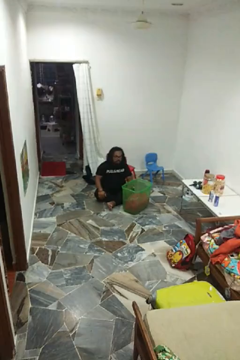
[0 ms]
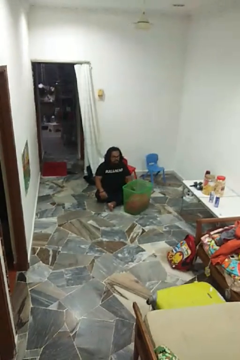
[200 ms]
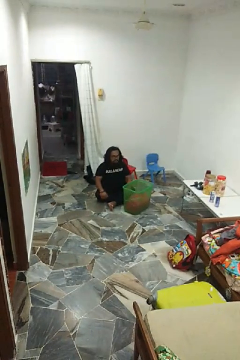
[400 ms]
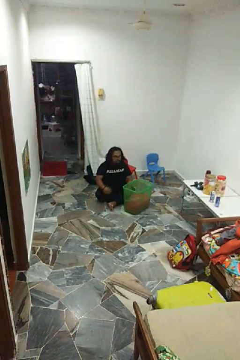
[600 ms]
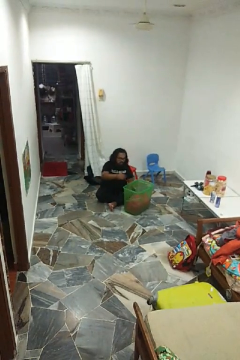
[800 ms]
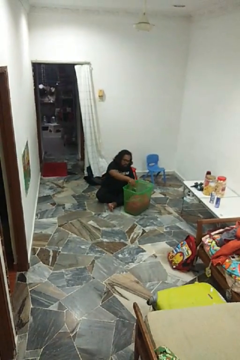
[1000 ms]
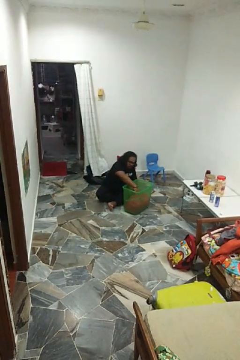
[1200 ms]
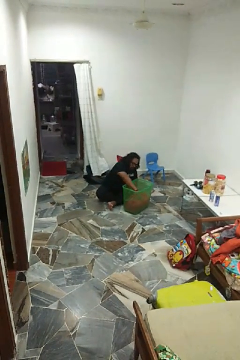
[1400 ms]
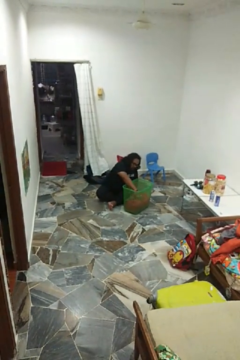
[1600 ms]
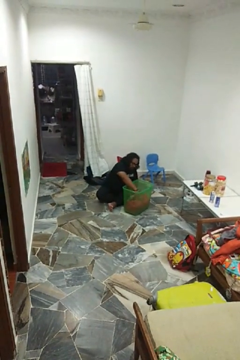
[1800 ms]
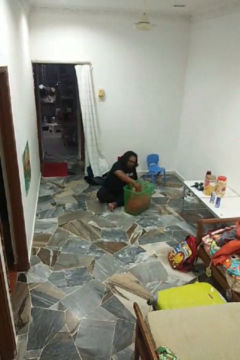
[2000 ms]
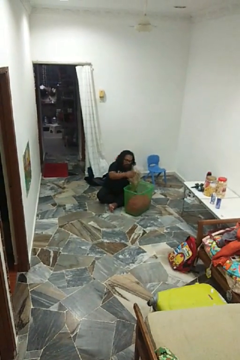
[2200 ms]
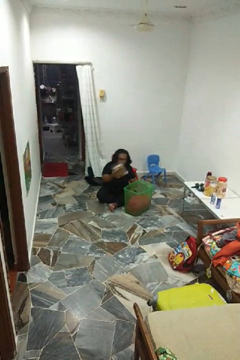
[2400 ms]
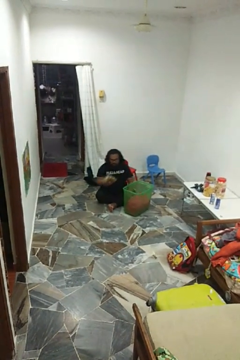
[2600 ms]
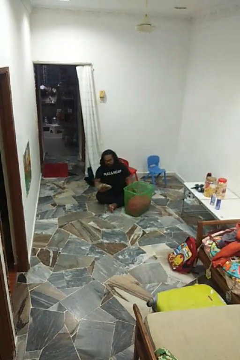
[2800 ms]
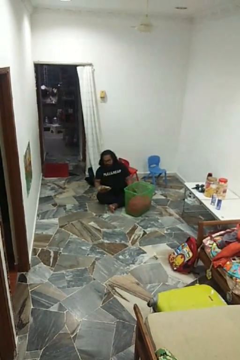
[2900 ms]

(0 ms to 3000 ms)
person takes object from basket

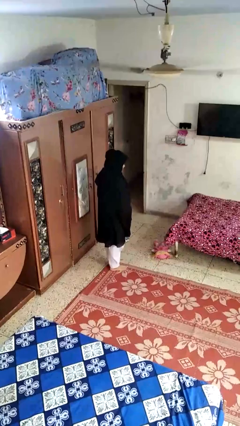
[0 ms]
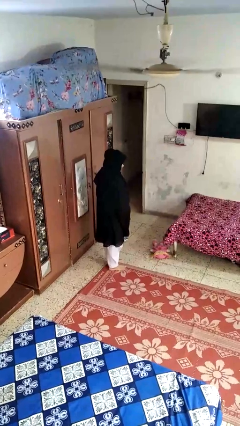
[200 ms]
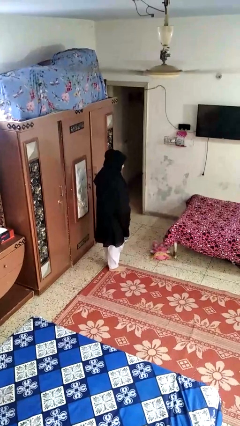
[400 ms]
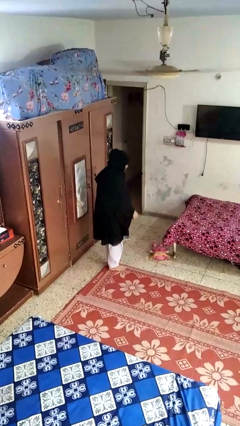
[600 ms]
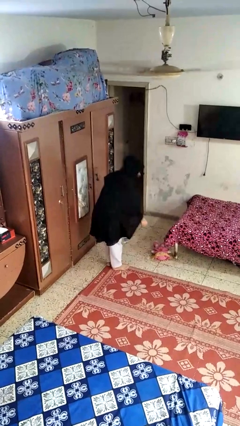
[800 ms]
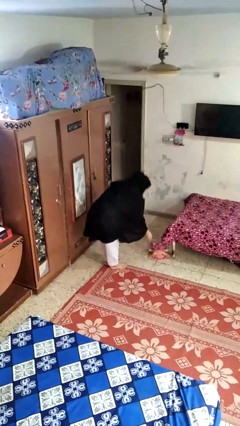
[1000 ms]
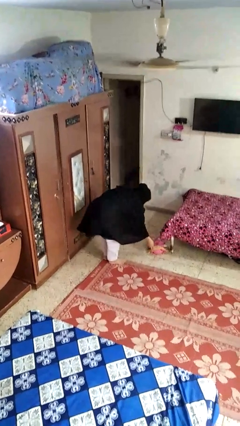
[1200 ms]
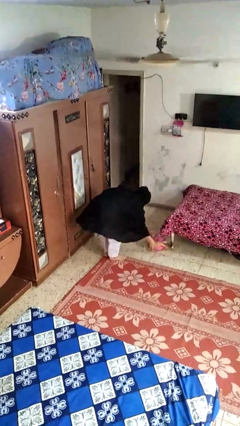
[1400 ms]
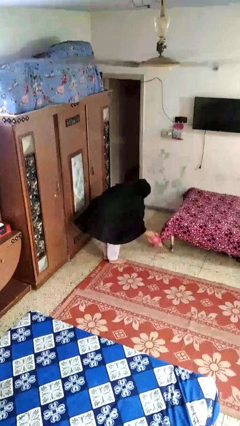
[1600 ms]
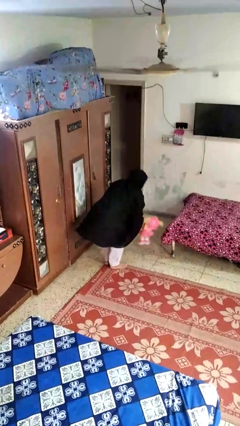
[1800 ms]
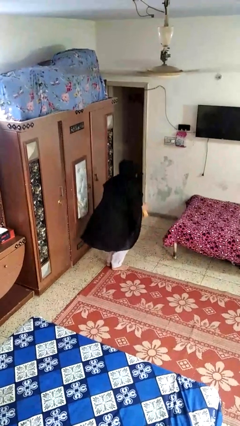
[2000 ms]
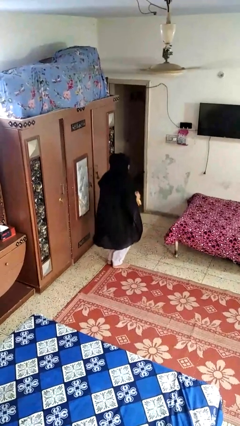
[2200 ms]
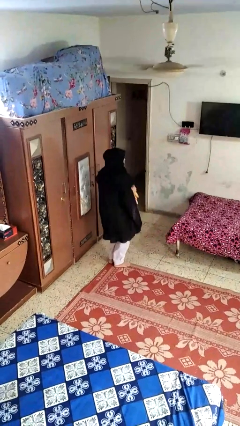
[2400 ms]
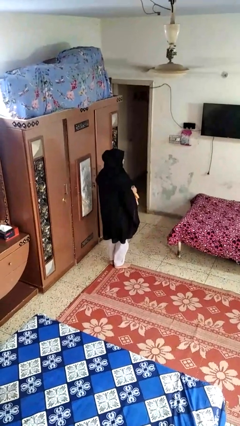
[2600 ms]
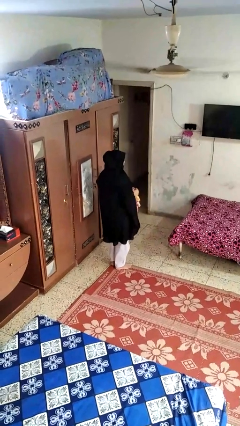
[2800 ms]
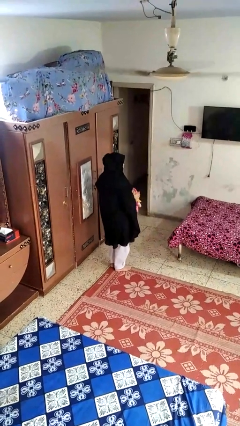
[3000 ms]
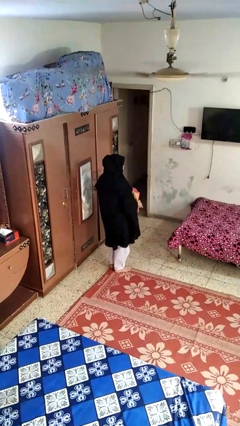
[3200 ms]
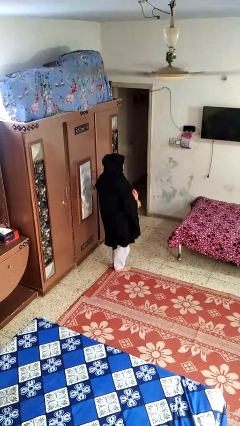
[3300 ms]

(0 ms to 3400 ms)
person picks up object from floor

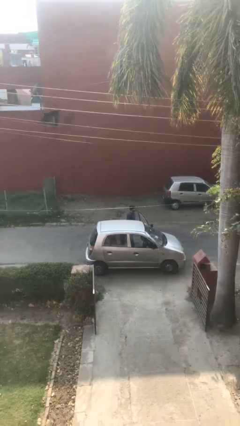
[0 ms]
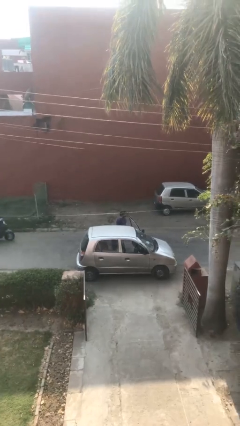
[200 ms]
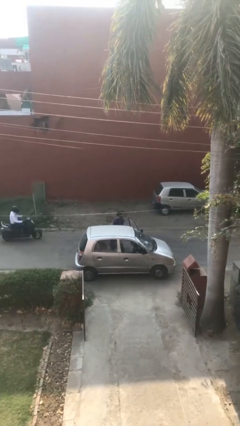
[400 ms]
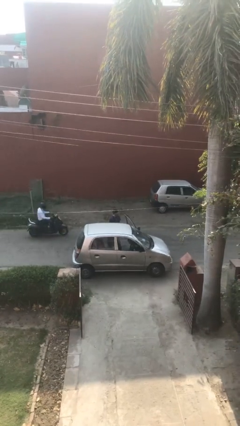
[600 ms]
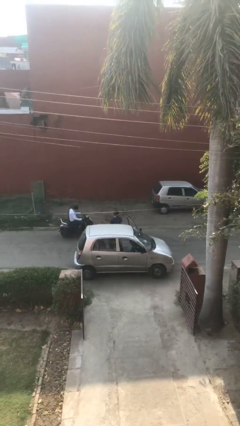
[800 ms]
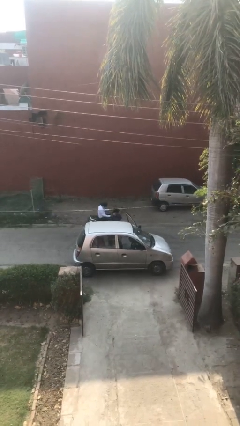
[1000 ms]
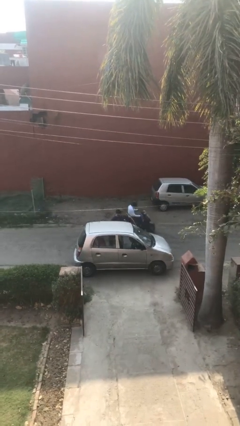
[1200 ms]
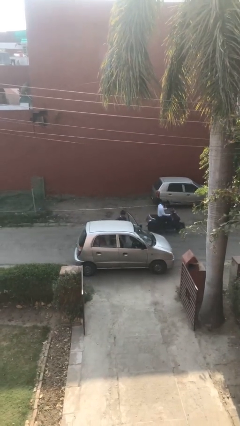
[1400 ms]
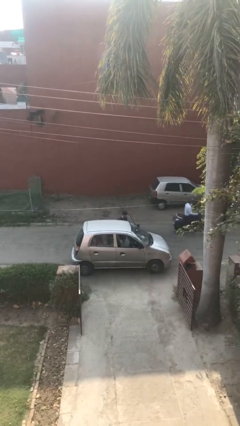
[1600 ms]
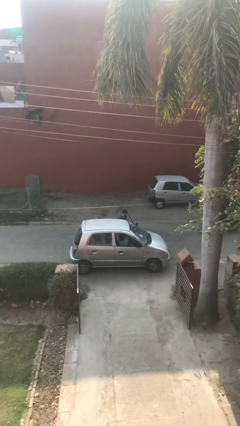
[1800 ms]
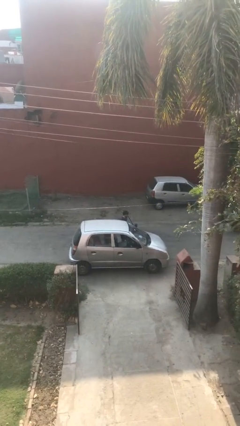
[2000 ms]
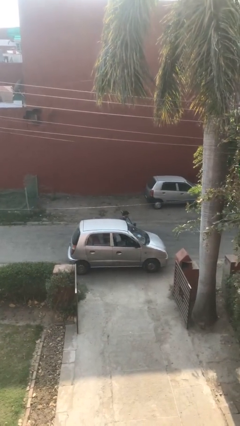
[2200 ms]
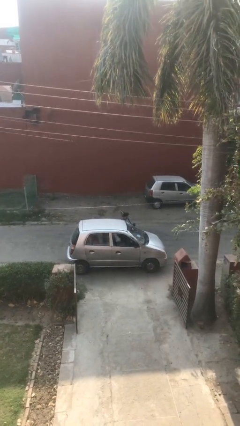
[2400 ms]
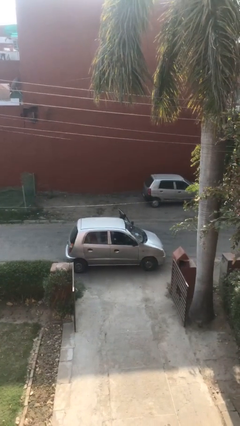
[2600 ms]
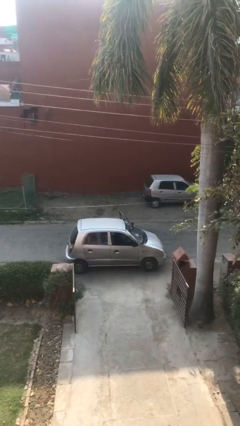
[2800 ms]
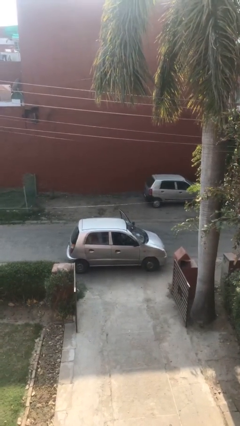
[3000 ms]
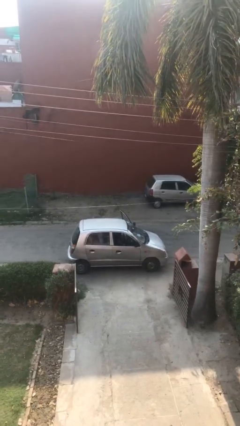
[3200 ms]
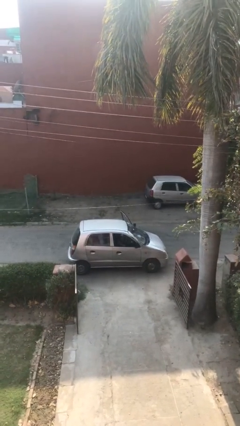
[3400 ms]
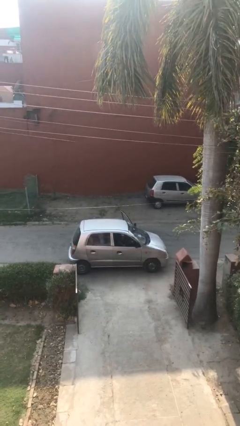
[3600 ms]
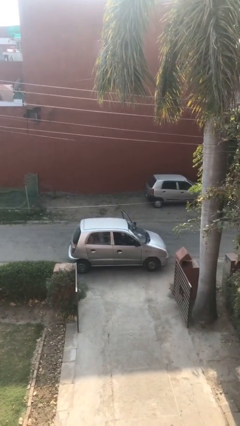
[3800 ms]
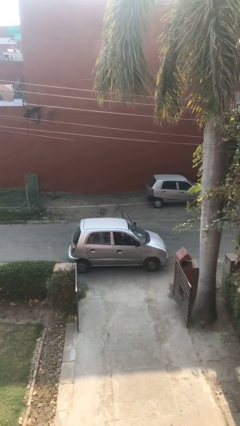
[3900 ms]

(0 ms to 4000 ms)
person enters car

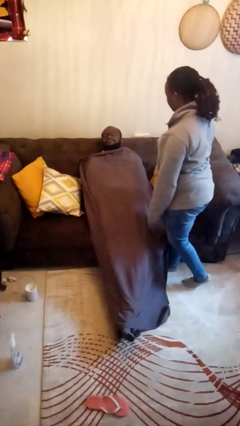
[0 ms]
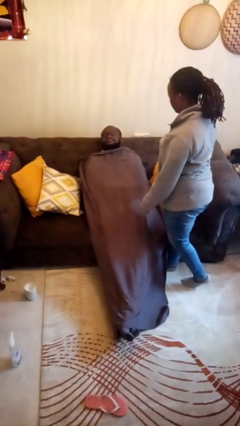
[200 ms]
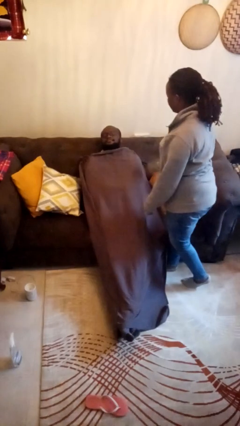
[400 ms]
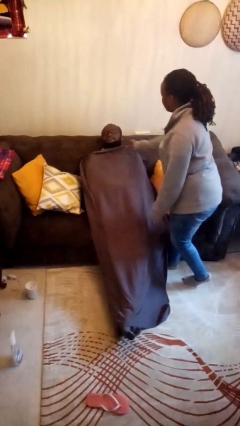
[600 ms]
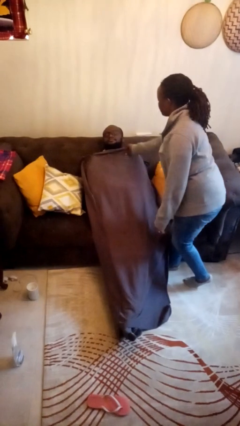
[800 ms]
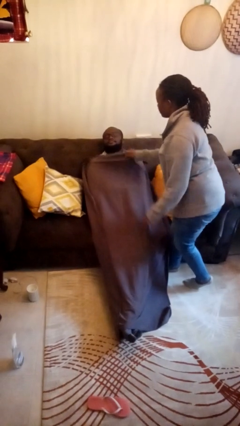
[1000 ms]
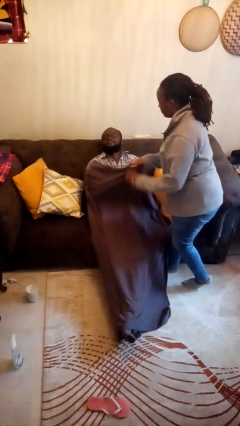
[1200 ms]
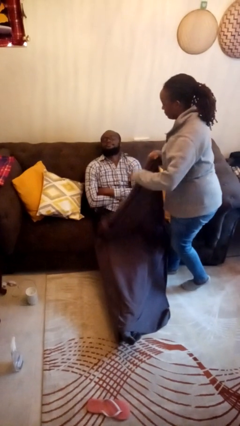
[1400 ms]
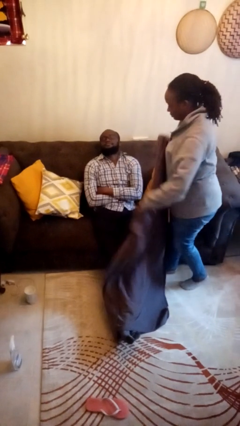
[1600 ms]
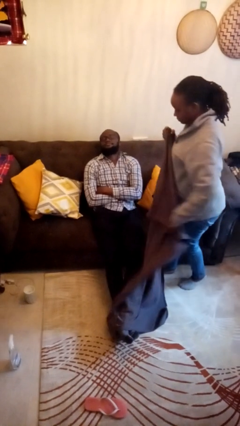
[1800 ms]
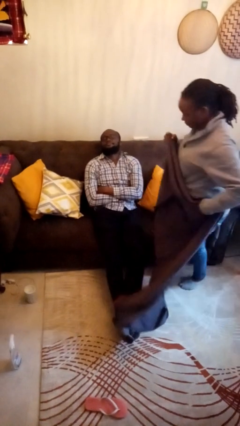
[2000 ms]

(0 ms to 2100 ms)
person uncovers friend with blanket

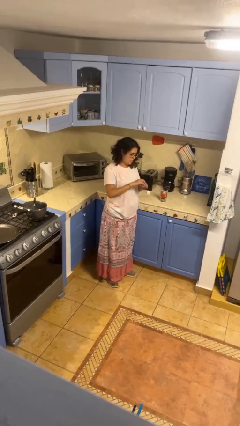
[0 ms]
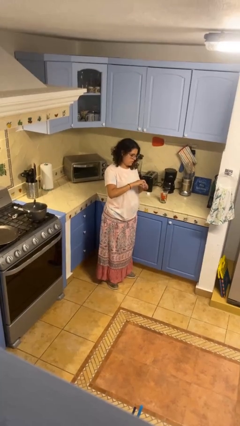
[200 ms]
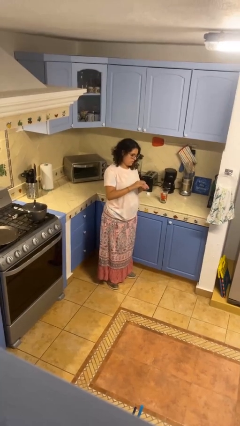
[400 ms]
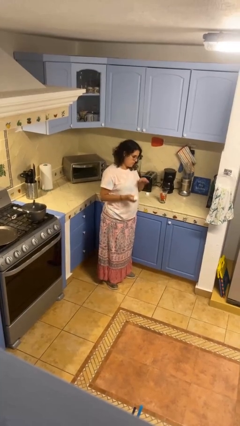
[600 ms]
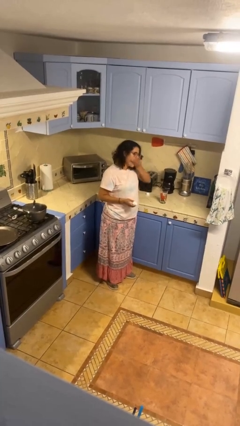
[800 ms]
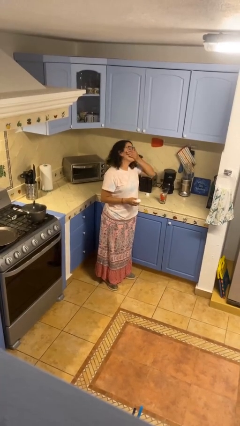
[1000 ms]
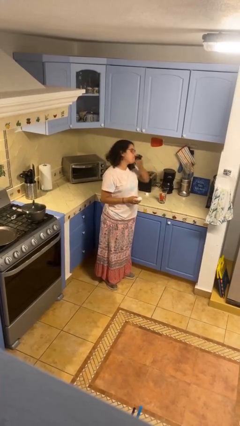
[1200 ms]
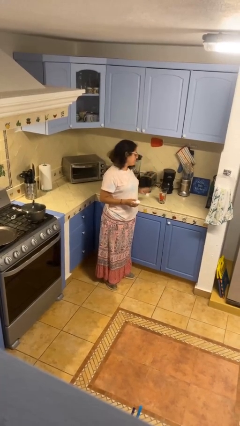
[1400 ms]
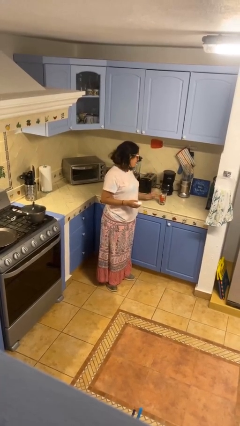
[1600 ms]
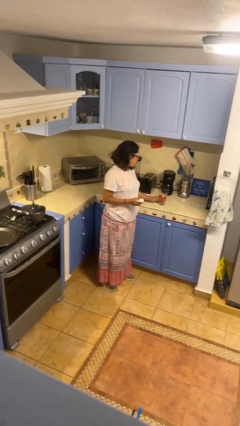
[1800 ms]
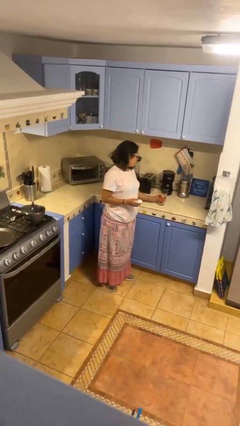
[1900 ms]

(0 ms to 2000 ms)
person takes medicine pills

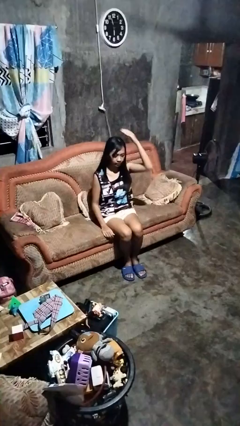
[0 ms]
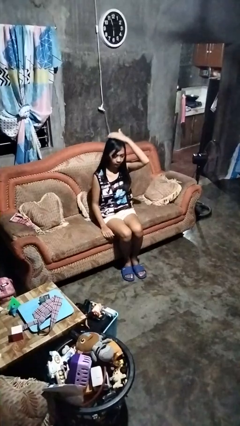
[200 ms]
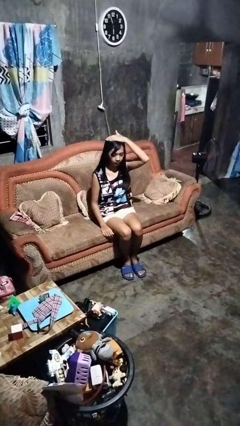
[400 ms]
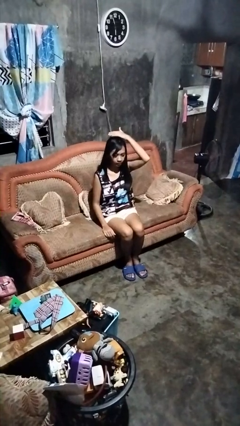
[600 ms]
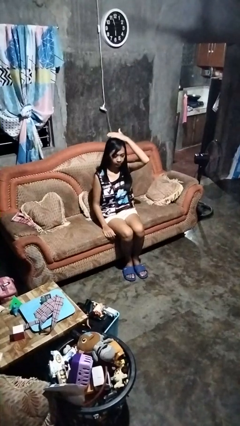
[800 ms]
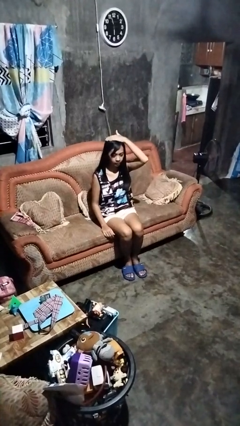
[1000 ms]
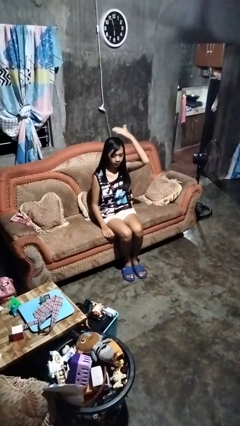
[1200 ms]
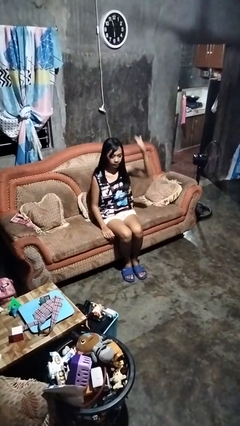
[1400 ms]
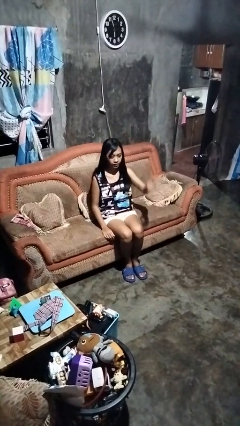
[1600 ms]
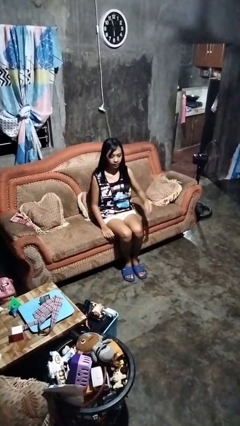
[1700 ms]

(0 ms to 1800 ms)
person pats head

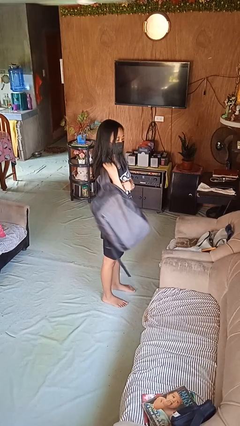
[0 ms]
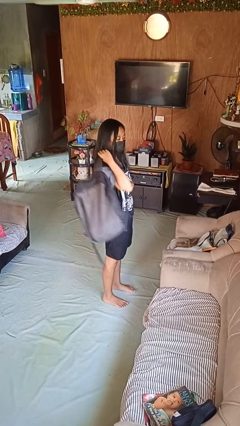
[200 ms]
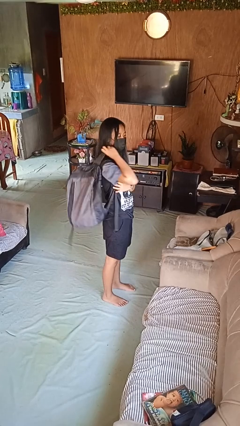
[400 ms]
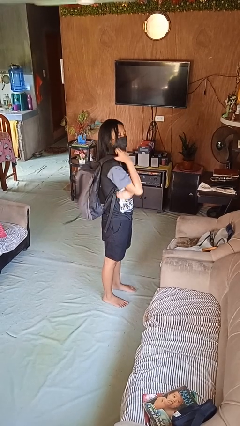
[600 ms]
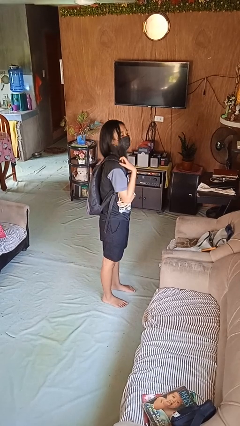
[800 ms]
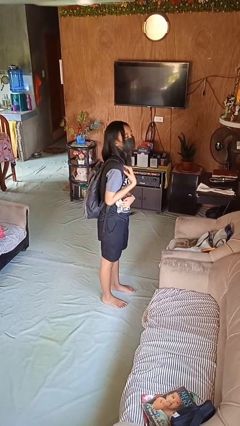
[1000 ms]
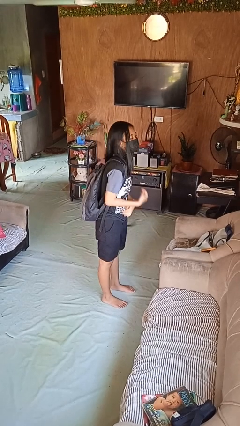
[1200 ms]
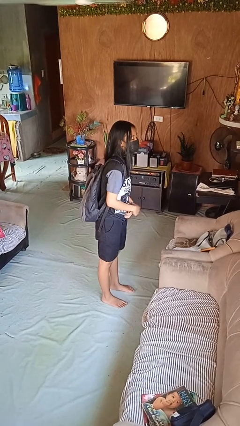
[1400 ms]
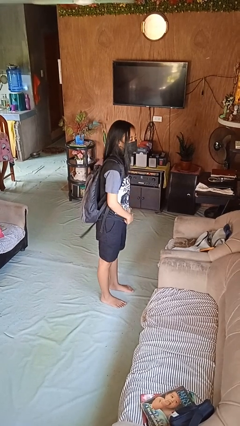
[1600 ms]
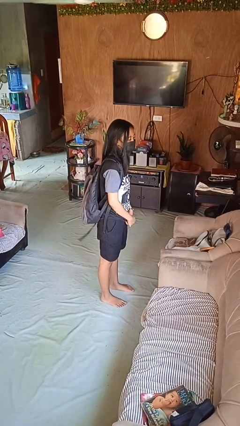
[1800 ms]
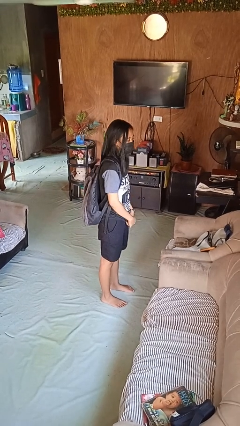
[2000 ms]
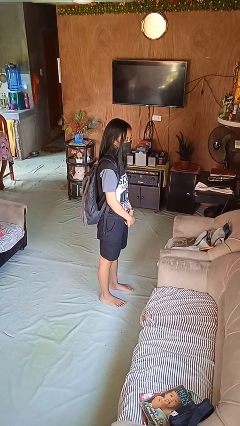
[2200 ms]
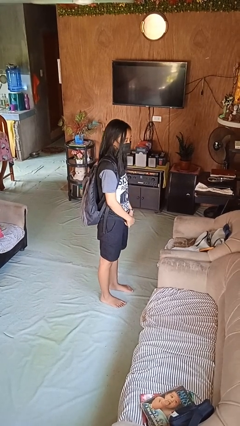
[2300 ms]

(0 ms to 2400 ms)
person puts on backpack
